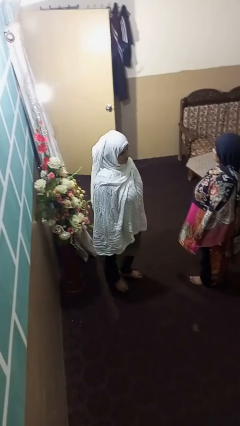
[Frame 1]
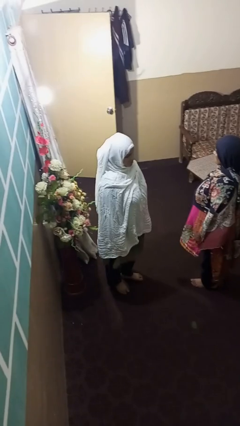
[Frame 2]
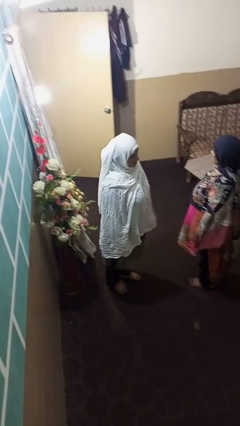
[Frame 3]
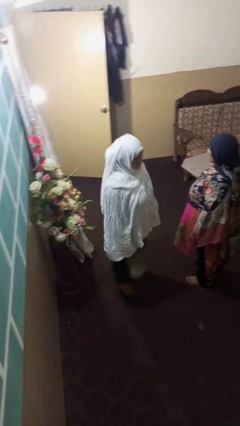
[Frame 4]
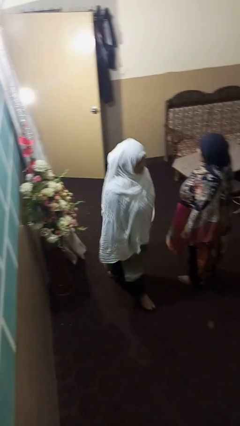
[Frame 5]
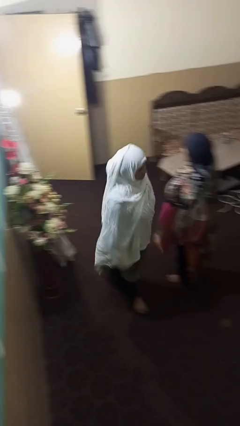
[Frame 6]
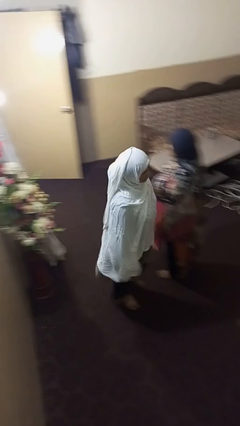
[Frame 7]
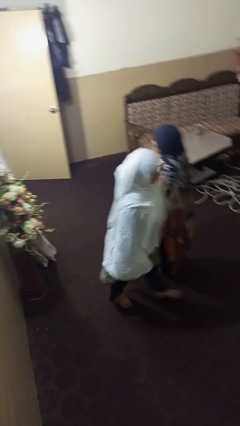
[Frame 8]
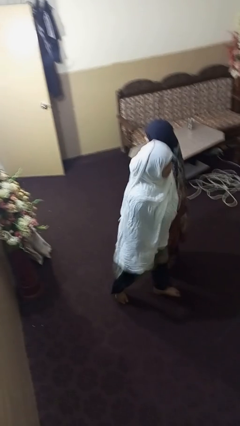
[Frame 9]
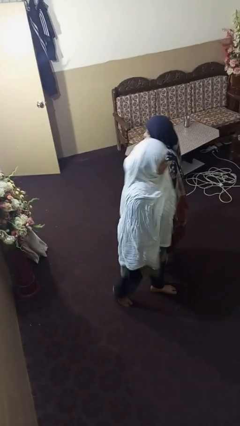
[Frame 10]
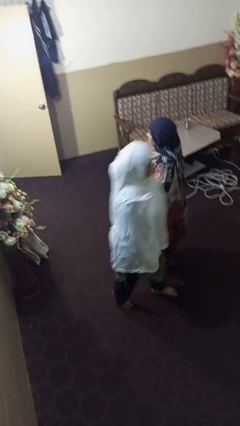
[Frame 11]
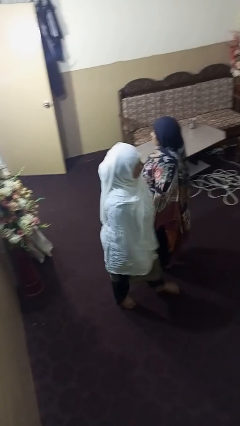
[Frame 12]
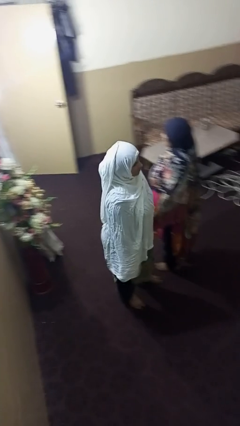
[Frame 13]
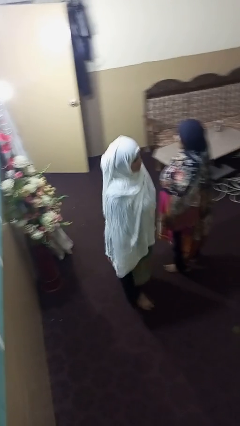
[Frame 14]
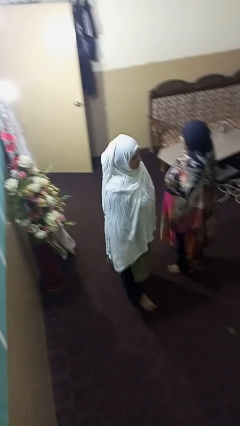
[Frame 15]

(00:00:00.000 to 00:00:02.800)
person shoves person

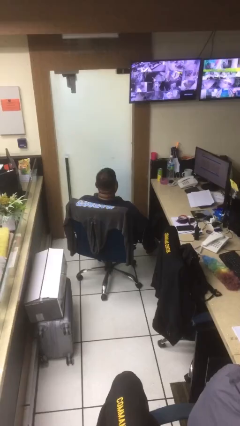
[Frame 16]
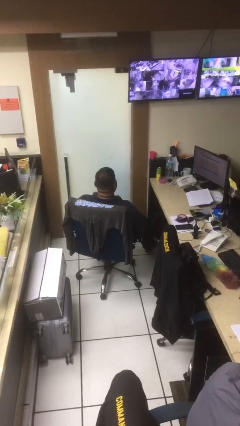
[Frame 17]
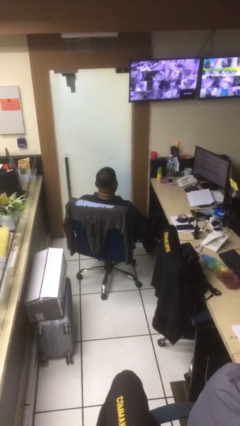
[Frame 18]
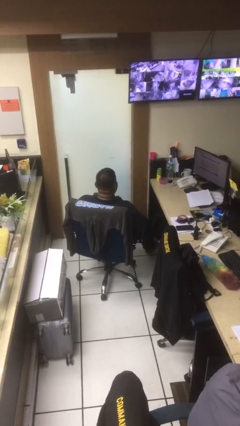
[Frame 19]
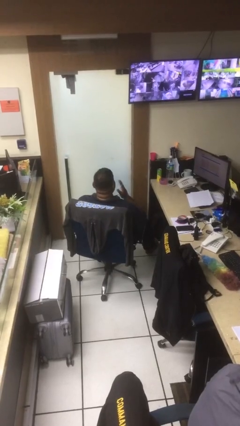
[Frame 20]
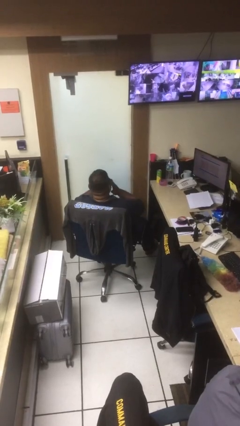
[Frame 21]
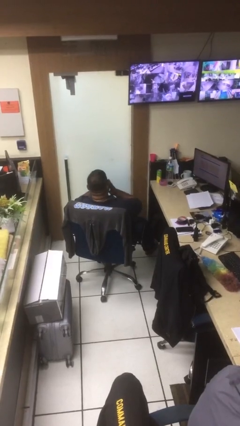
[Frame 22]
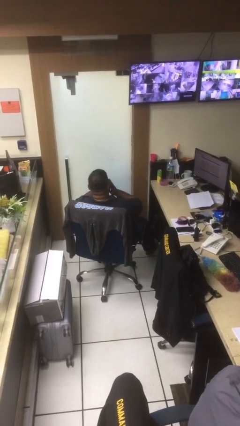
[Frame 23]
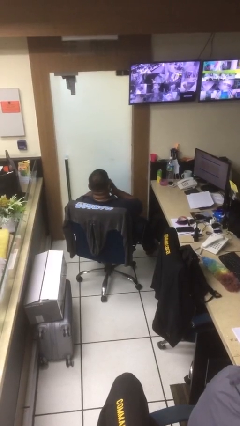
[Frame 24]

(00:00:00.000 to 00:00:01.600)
person covers face with hands

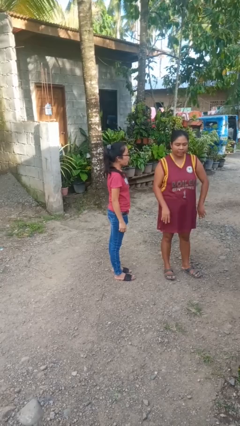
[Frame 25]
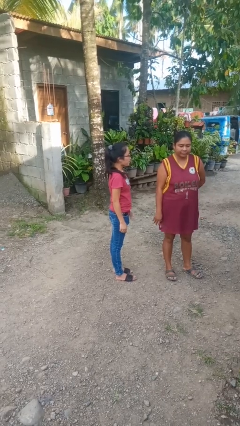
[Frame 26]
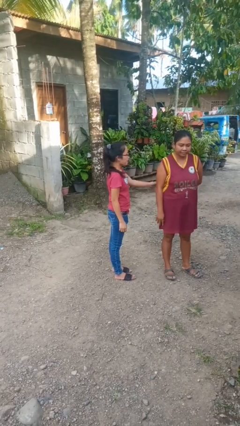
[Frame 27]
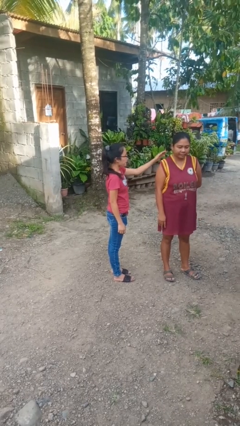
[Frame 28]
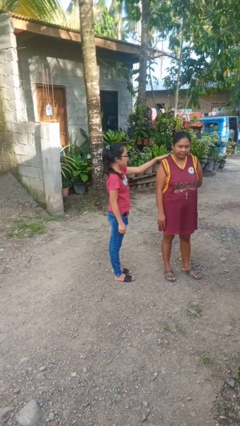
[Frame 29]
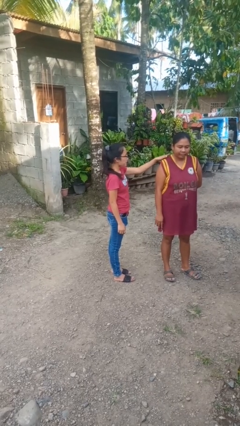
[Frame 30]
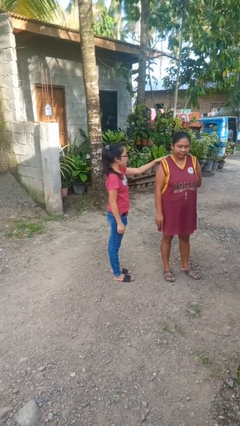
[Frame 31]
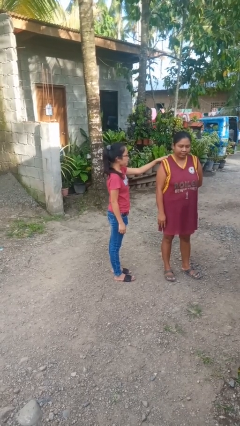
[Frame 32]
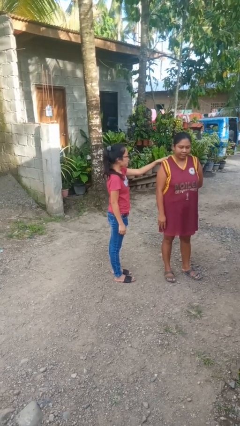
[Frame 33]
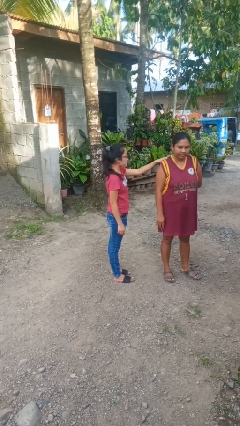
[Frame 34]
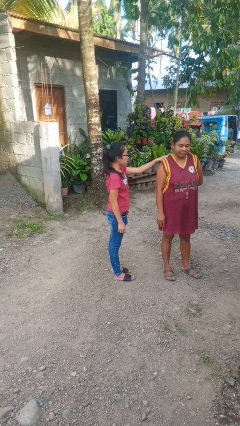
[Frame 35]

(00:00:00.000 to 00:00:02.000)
person pounds shoulders of person

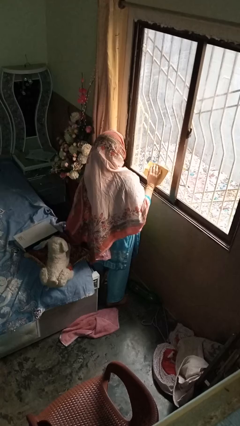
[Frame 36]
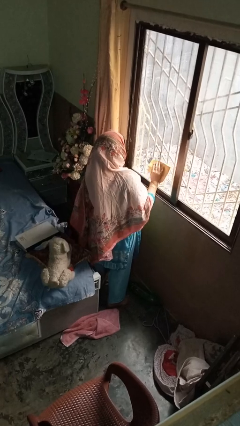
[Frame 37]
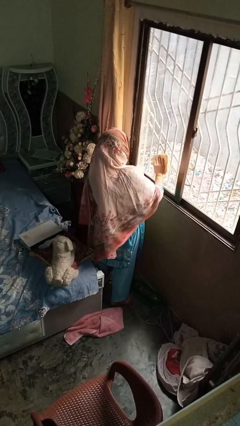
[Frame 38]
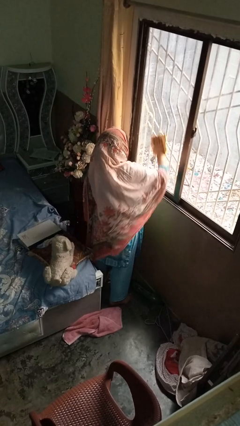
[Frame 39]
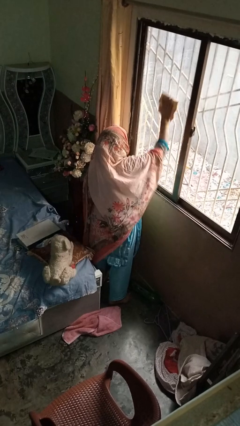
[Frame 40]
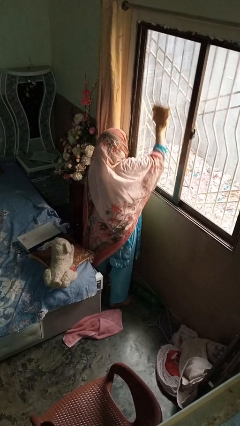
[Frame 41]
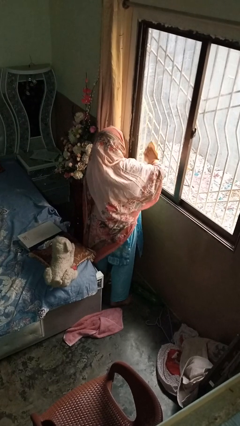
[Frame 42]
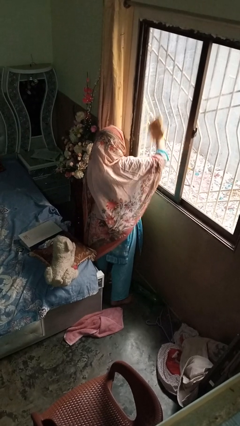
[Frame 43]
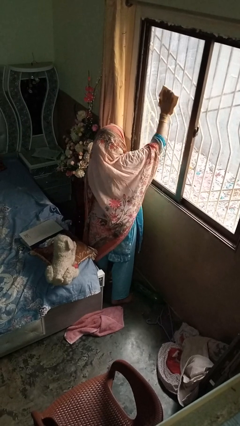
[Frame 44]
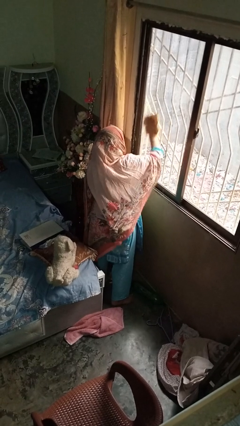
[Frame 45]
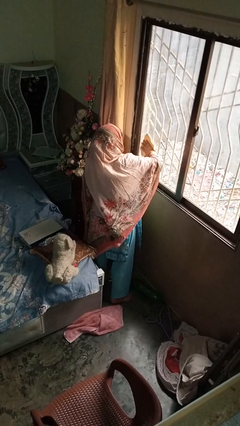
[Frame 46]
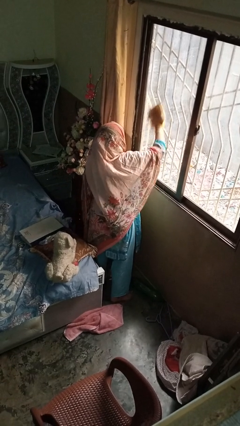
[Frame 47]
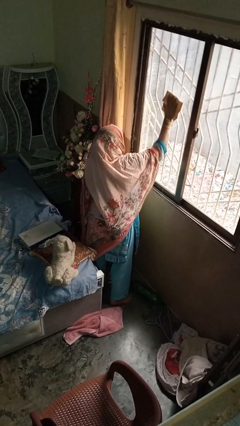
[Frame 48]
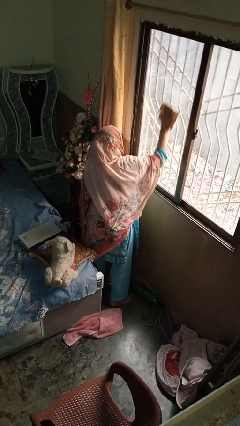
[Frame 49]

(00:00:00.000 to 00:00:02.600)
person washes window

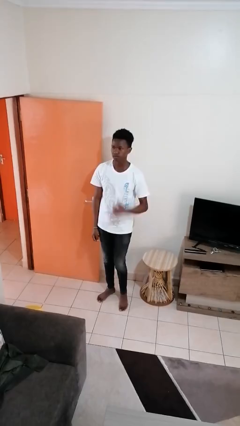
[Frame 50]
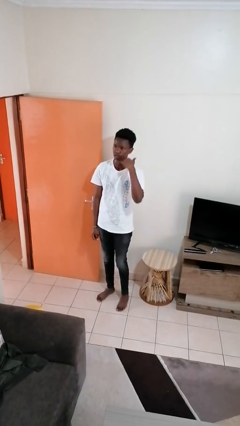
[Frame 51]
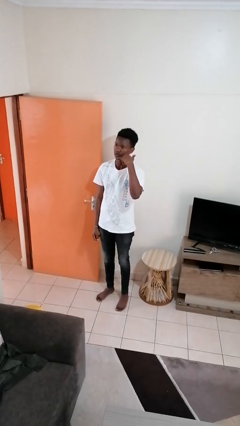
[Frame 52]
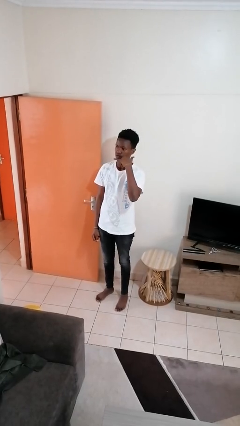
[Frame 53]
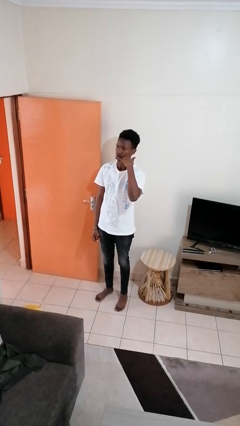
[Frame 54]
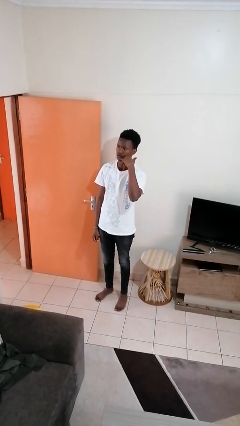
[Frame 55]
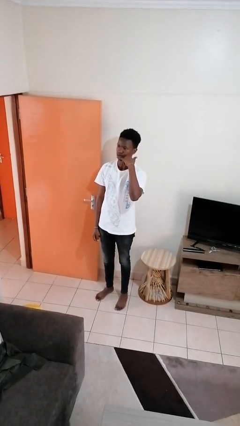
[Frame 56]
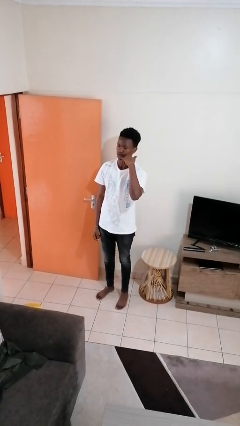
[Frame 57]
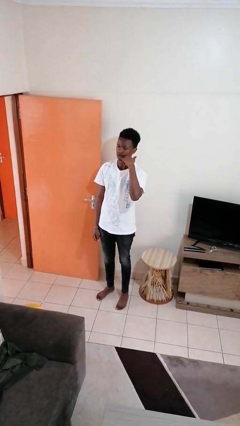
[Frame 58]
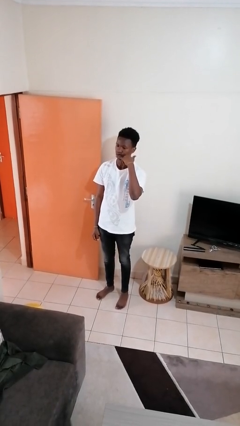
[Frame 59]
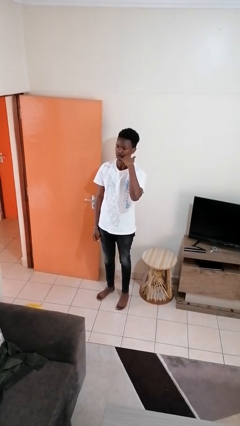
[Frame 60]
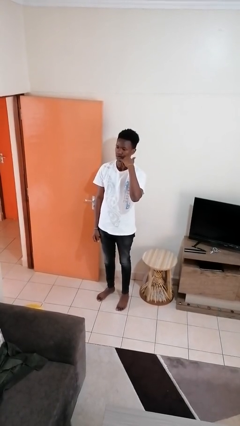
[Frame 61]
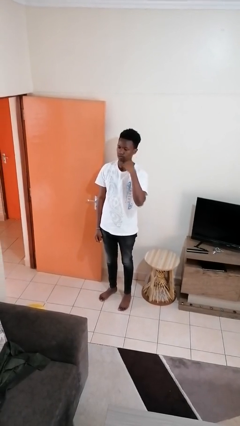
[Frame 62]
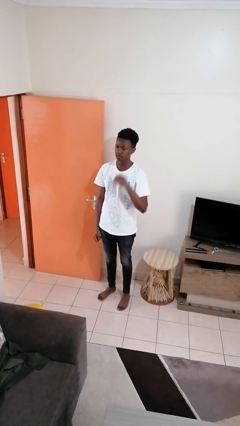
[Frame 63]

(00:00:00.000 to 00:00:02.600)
person gestures call me

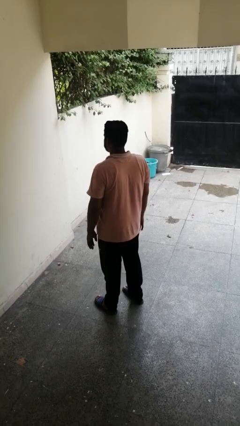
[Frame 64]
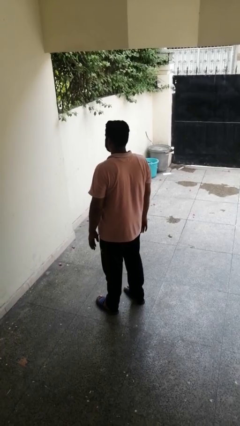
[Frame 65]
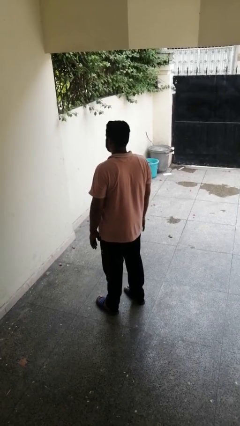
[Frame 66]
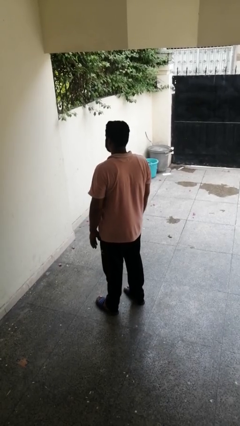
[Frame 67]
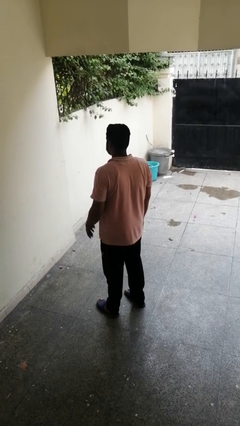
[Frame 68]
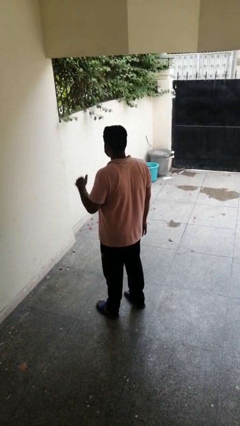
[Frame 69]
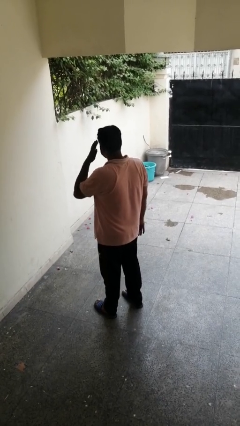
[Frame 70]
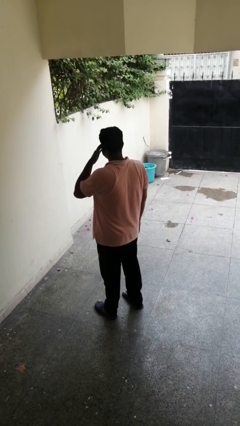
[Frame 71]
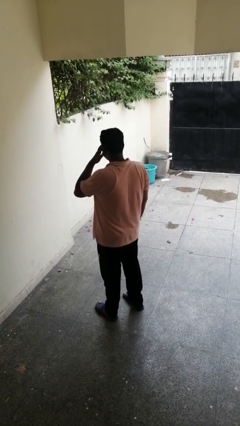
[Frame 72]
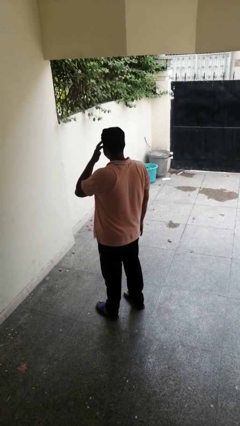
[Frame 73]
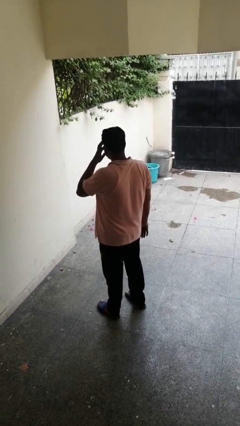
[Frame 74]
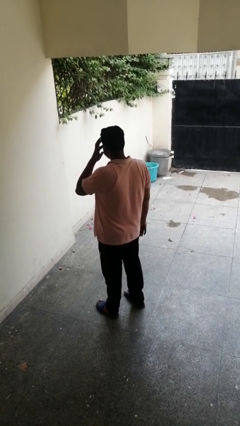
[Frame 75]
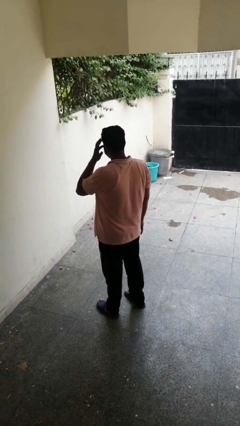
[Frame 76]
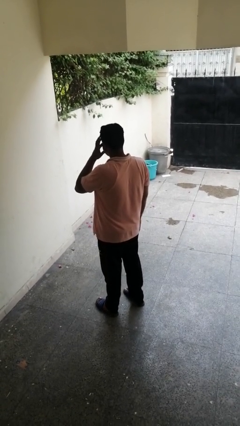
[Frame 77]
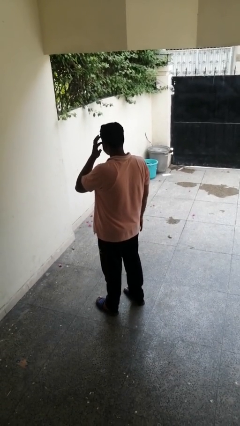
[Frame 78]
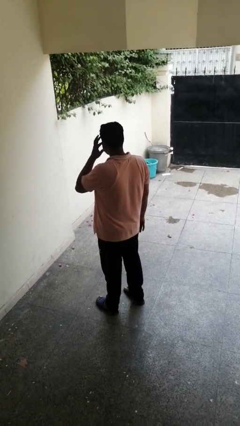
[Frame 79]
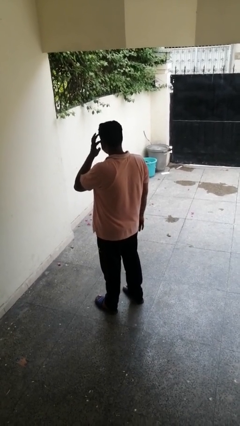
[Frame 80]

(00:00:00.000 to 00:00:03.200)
person rubs eyes

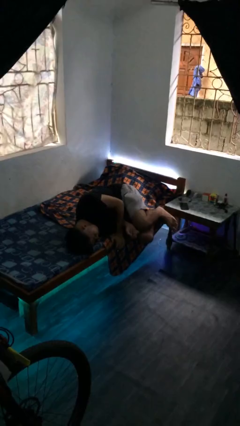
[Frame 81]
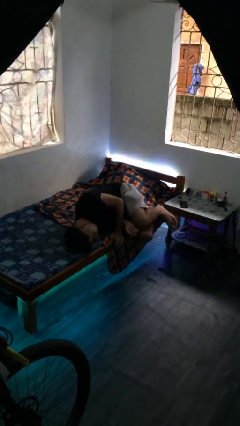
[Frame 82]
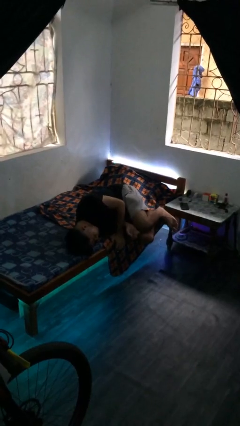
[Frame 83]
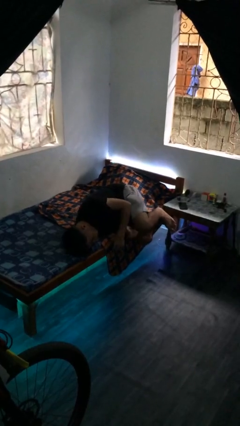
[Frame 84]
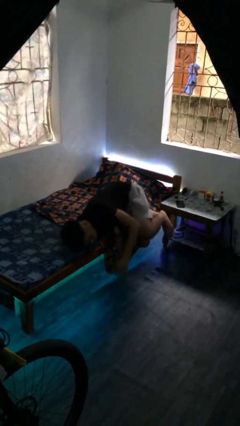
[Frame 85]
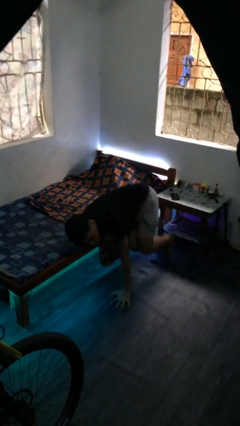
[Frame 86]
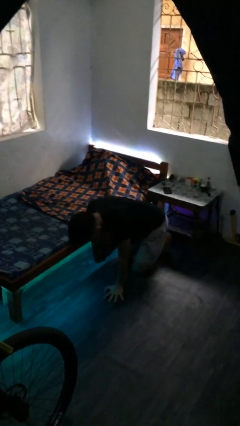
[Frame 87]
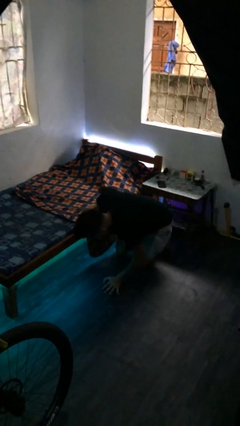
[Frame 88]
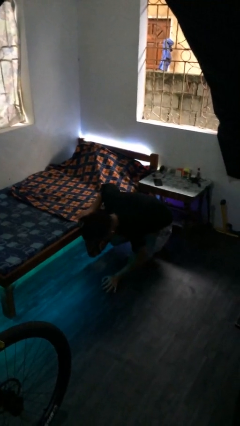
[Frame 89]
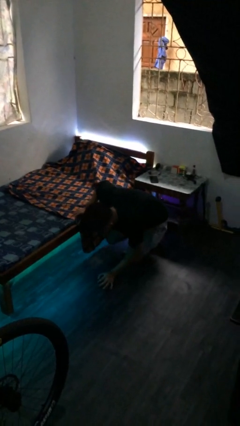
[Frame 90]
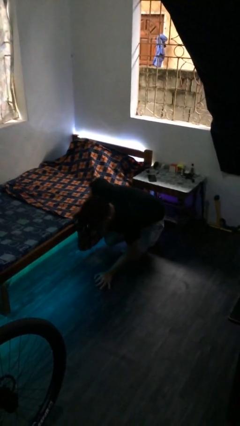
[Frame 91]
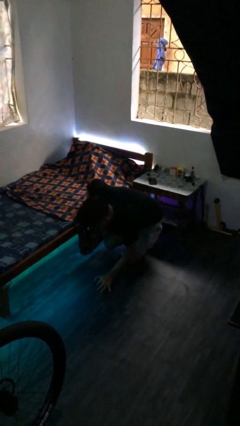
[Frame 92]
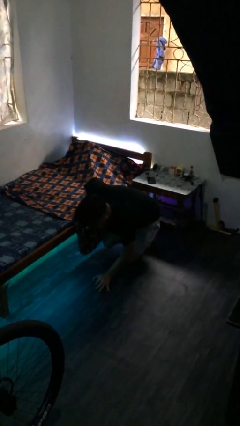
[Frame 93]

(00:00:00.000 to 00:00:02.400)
person falls from bed
